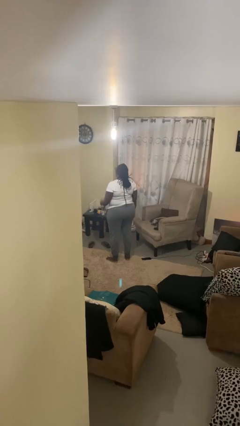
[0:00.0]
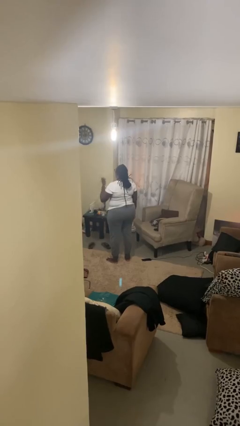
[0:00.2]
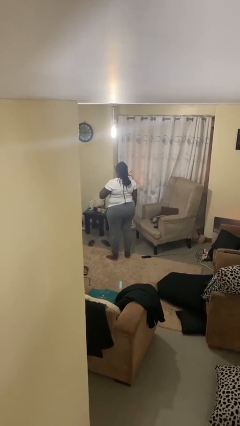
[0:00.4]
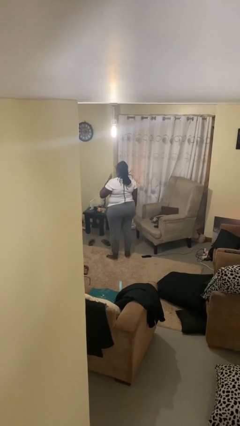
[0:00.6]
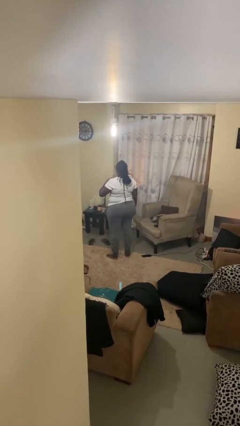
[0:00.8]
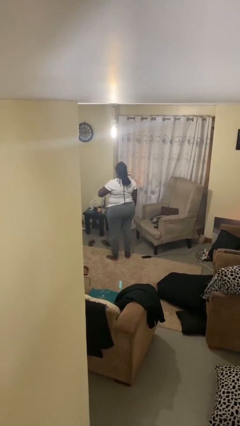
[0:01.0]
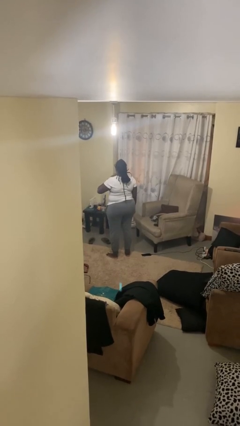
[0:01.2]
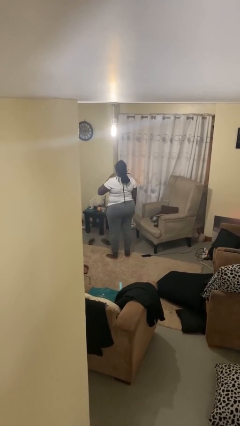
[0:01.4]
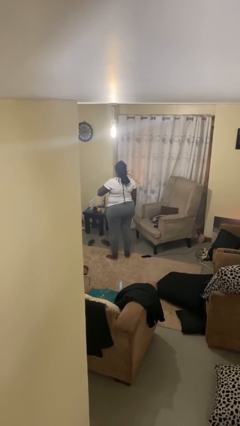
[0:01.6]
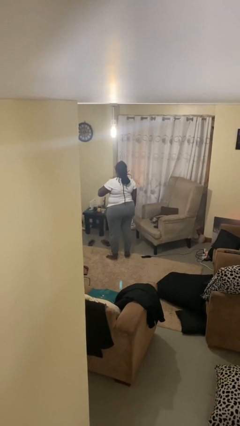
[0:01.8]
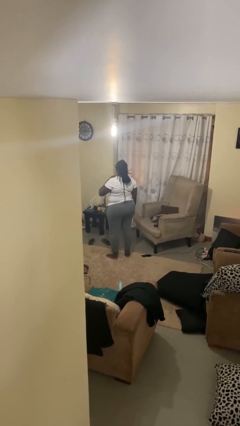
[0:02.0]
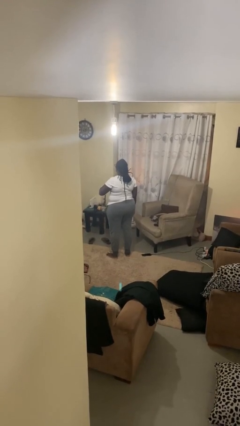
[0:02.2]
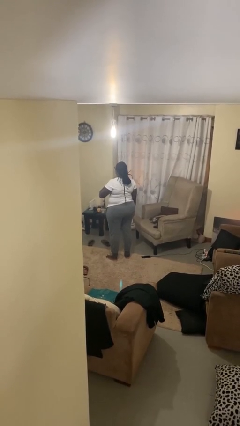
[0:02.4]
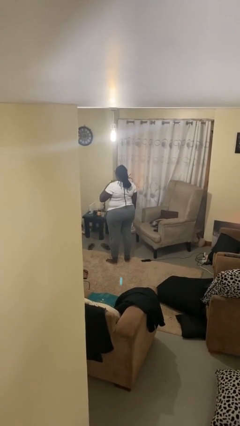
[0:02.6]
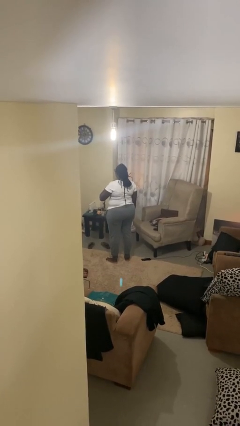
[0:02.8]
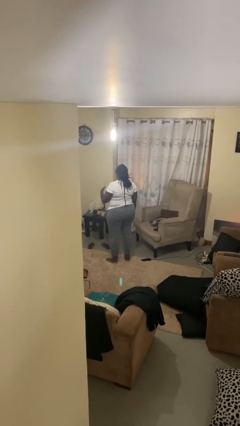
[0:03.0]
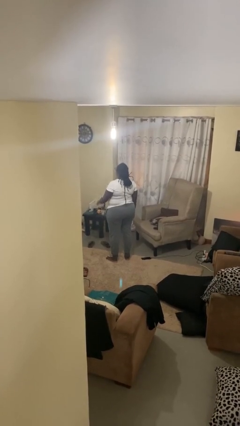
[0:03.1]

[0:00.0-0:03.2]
person drums on chest

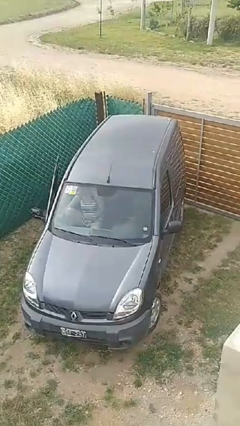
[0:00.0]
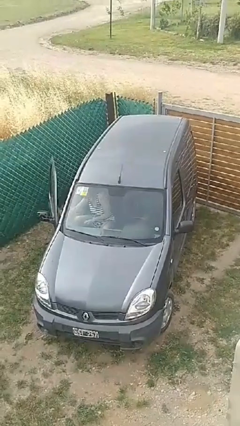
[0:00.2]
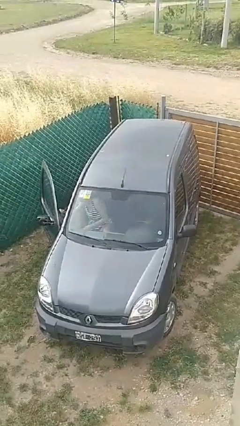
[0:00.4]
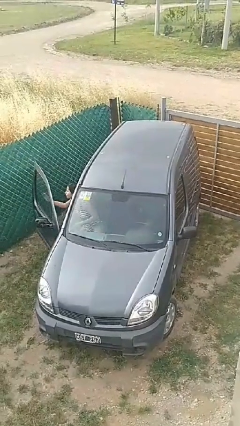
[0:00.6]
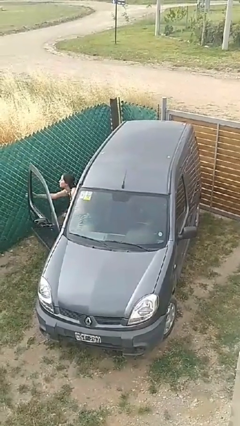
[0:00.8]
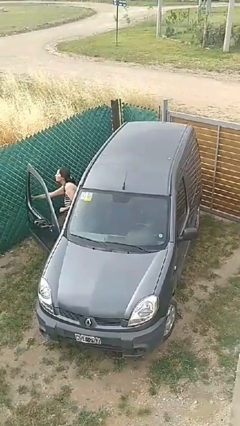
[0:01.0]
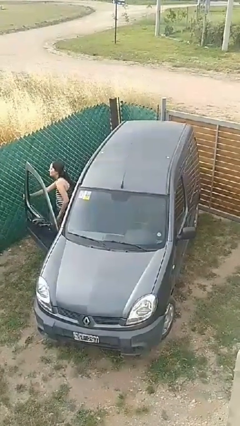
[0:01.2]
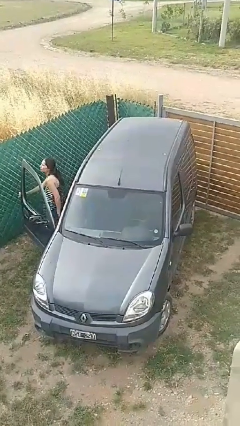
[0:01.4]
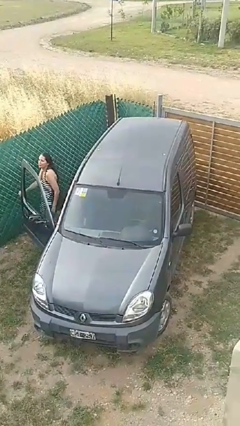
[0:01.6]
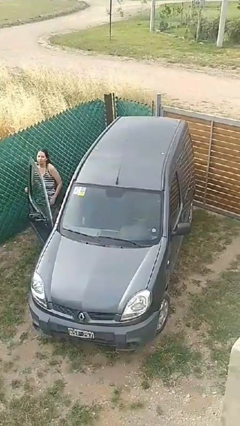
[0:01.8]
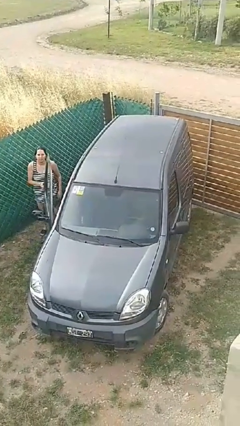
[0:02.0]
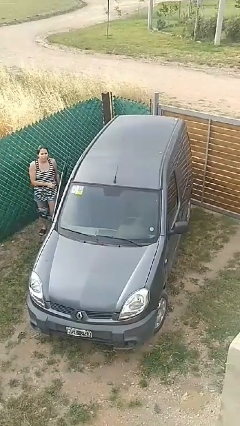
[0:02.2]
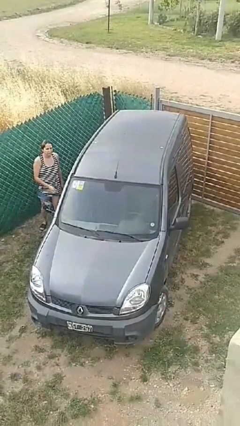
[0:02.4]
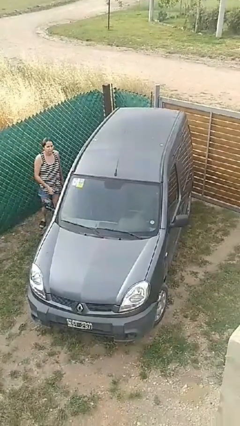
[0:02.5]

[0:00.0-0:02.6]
car drops off person

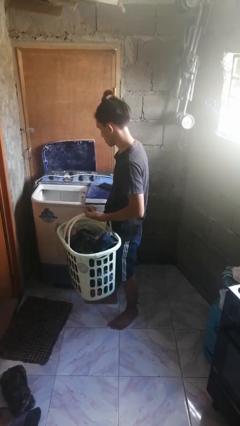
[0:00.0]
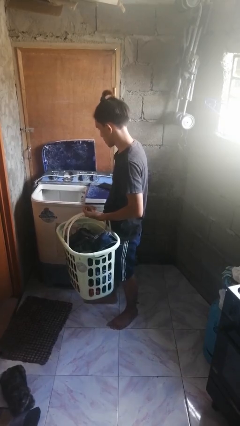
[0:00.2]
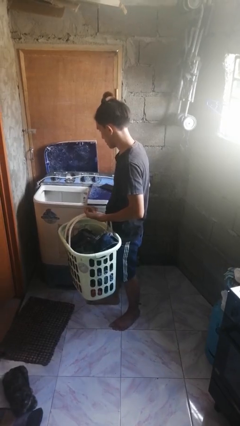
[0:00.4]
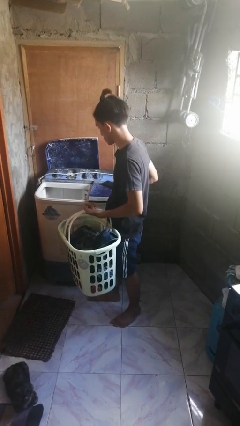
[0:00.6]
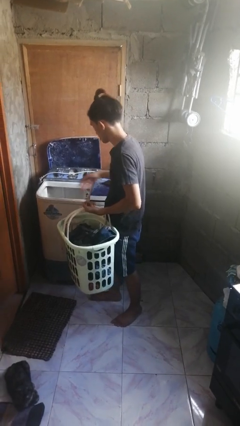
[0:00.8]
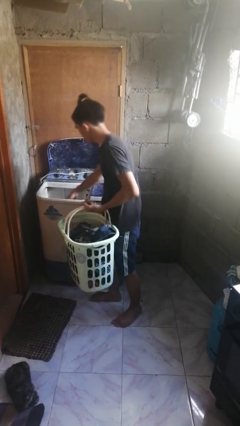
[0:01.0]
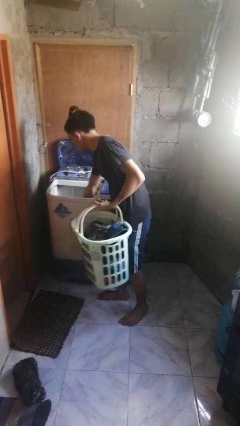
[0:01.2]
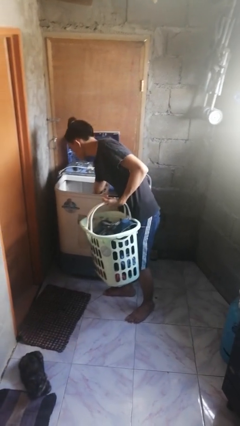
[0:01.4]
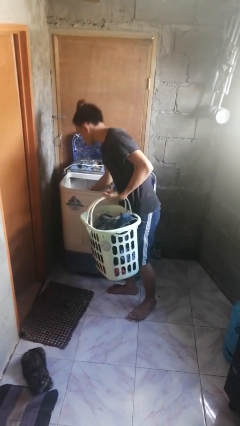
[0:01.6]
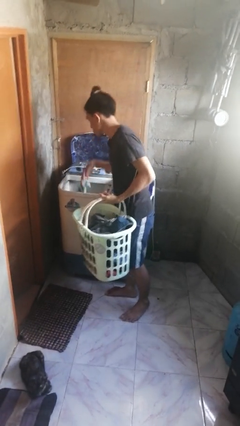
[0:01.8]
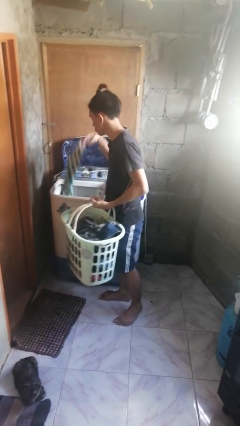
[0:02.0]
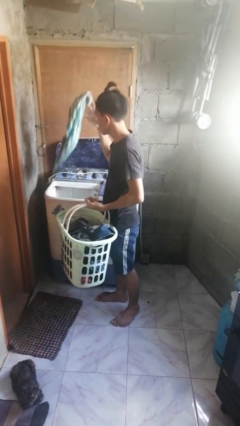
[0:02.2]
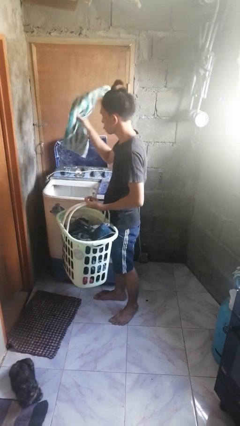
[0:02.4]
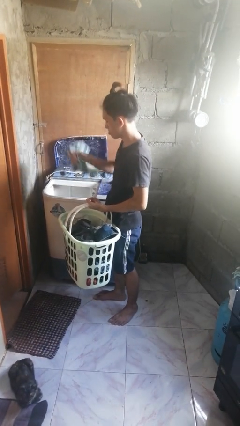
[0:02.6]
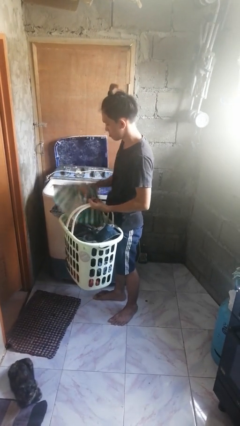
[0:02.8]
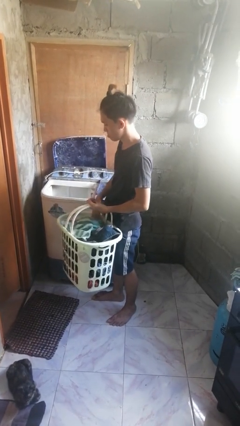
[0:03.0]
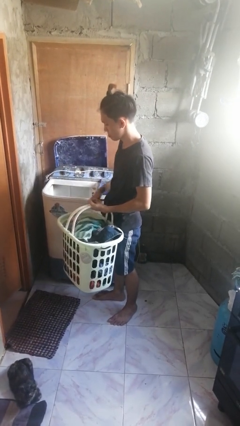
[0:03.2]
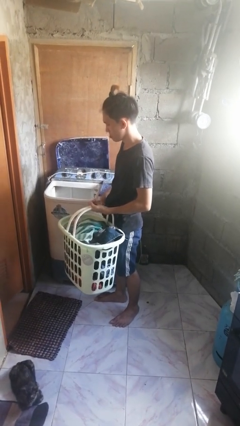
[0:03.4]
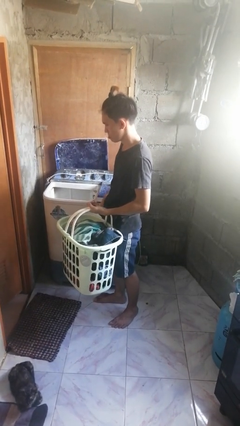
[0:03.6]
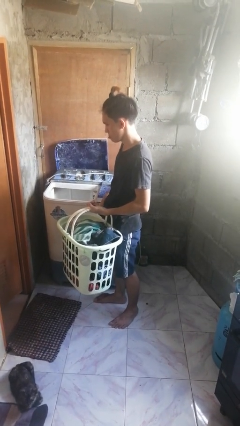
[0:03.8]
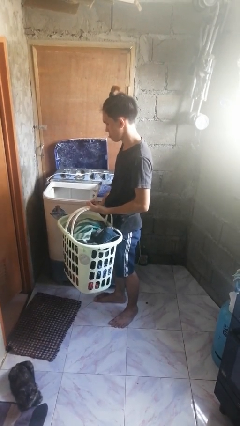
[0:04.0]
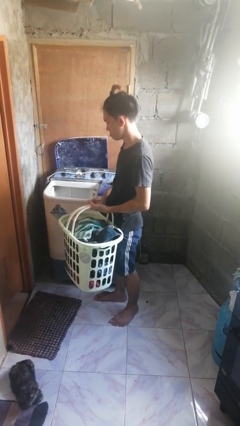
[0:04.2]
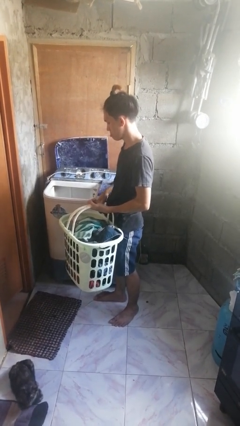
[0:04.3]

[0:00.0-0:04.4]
person unloads clotheswasher

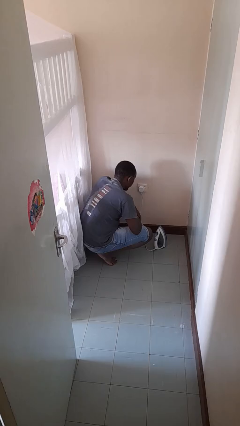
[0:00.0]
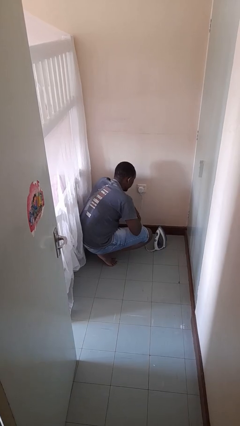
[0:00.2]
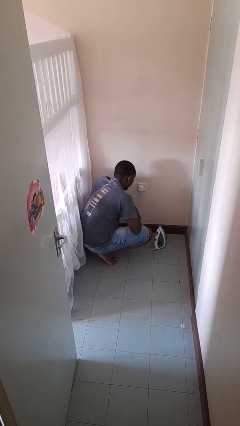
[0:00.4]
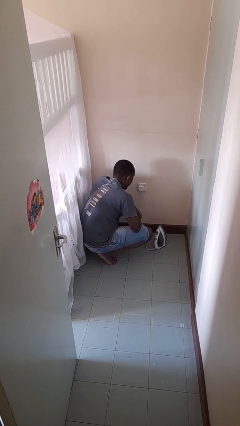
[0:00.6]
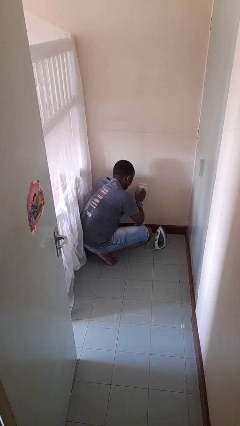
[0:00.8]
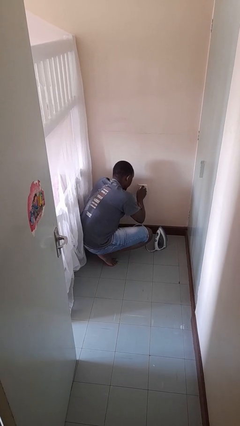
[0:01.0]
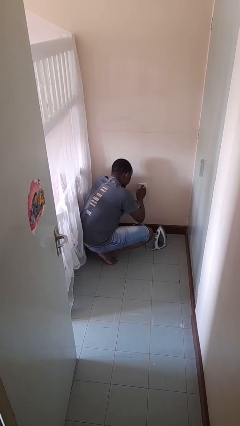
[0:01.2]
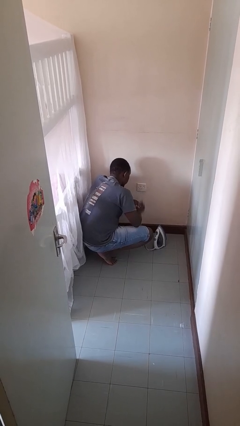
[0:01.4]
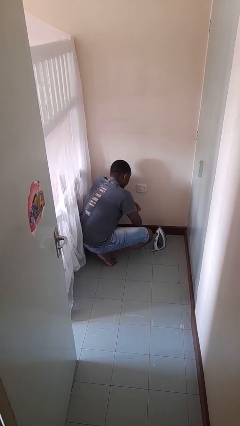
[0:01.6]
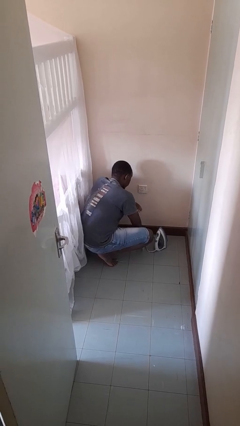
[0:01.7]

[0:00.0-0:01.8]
person unplugs from electrical socket

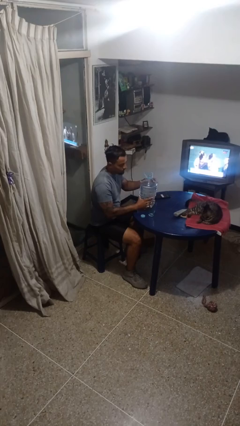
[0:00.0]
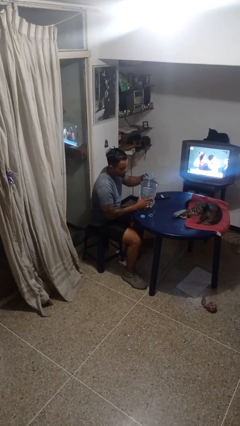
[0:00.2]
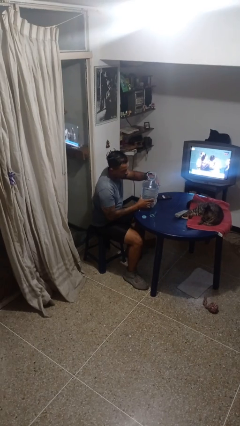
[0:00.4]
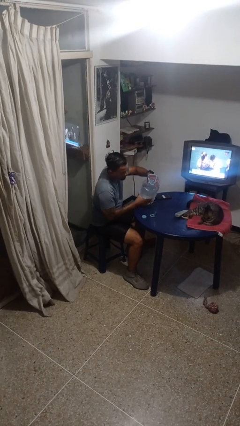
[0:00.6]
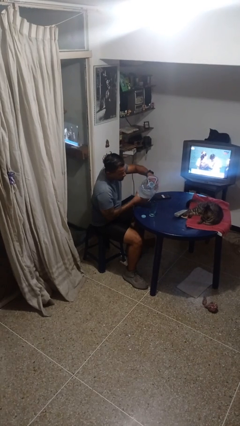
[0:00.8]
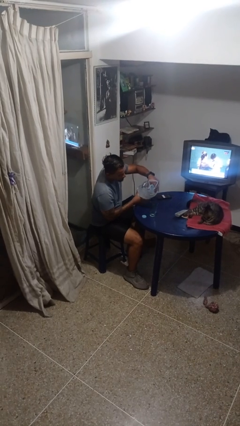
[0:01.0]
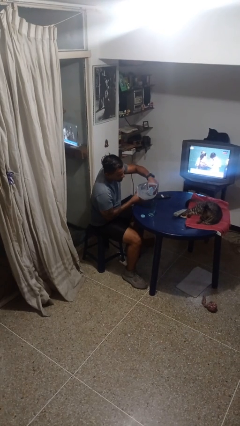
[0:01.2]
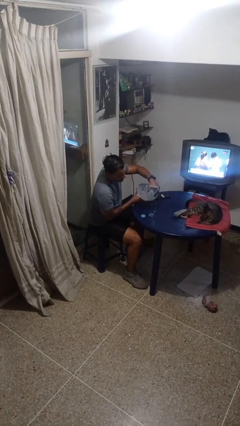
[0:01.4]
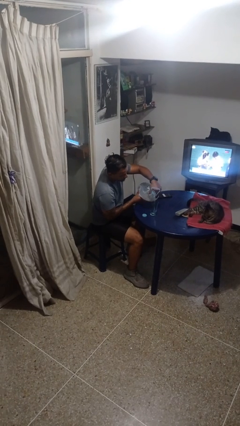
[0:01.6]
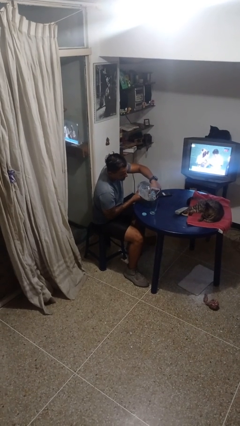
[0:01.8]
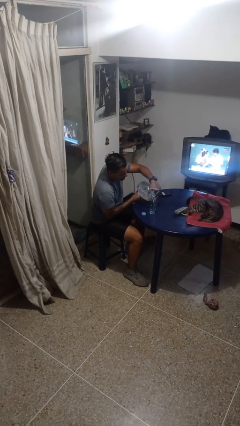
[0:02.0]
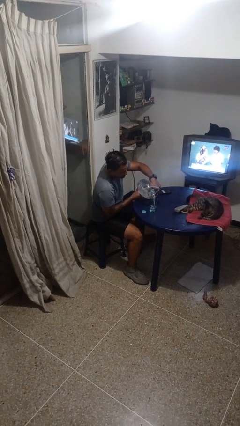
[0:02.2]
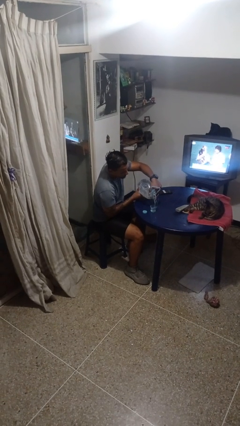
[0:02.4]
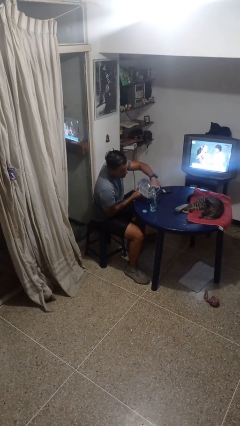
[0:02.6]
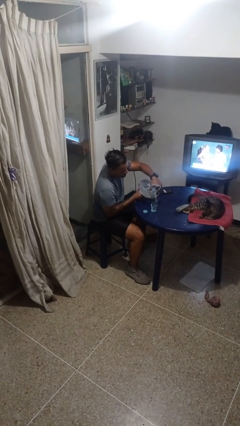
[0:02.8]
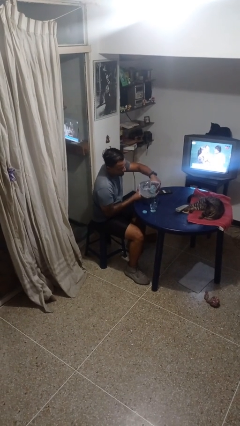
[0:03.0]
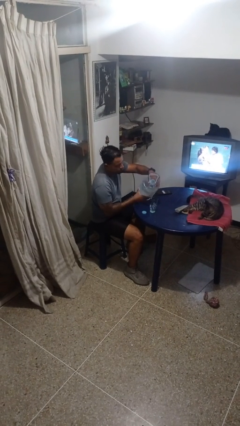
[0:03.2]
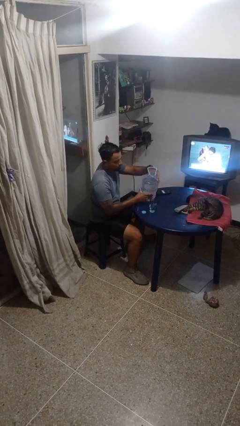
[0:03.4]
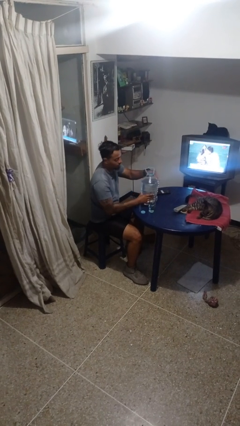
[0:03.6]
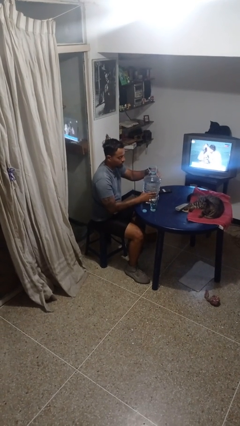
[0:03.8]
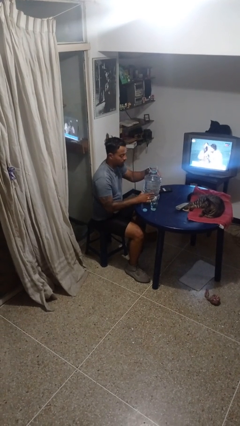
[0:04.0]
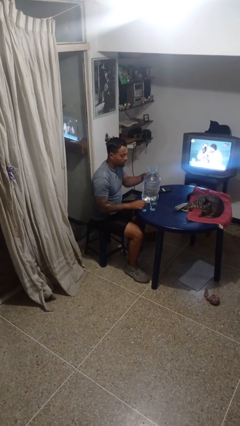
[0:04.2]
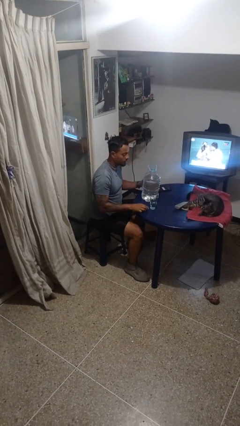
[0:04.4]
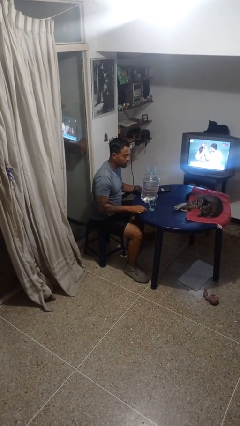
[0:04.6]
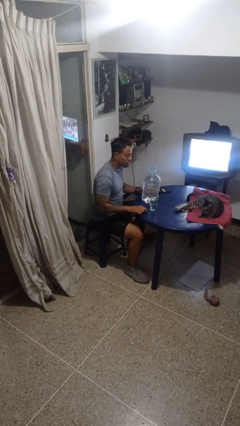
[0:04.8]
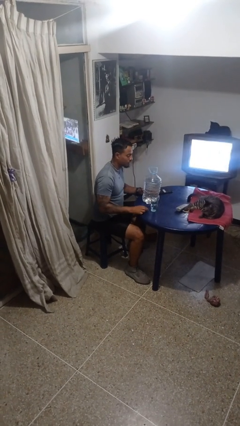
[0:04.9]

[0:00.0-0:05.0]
person pours liquid into cup

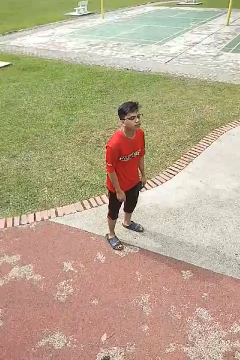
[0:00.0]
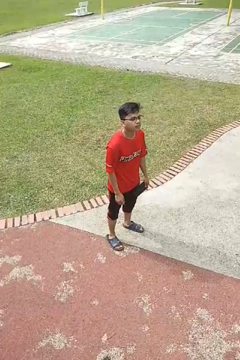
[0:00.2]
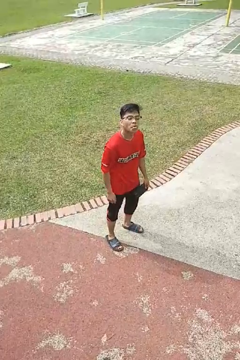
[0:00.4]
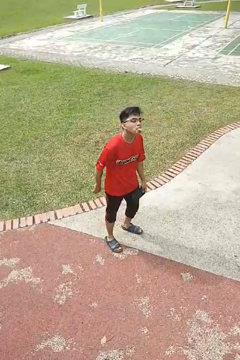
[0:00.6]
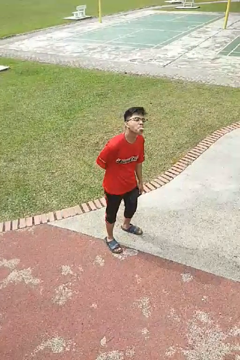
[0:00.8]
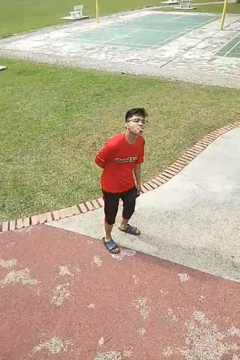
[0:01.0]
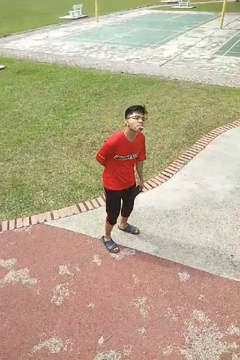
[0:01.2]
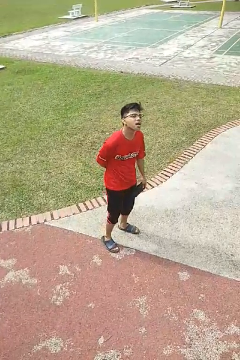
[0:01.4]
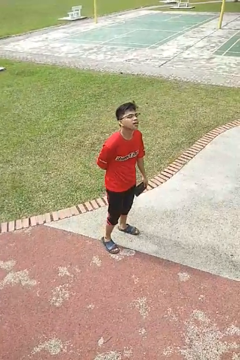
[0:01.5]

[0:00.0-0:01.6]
person sticks out tongue
